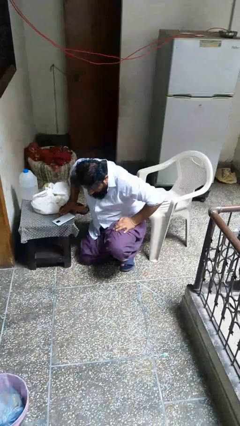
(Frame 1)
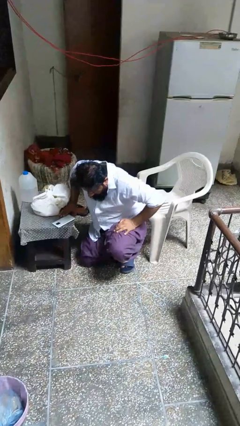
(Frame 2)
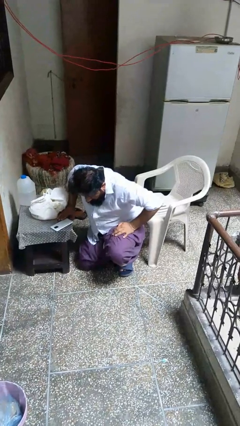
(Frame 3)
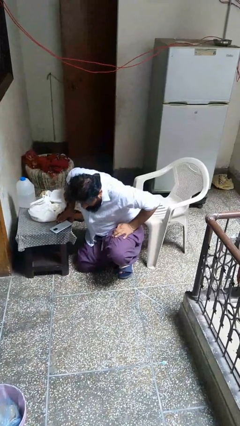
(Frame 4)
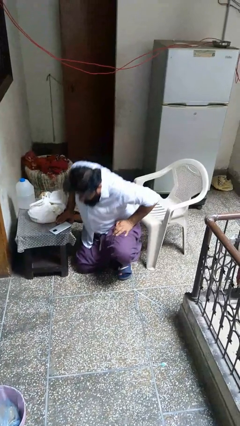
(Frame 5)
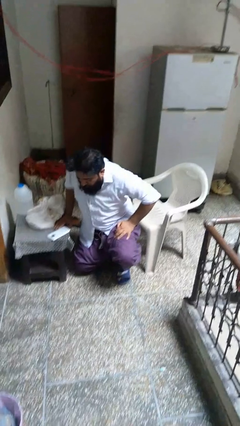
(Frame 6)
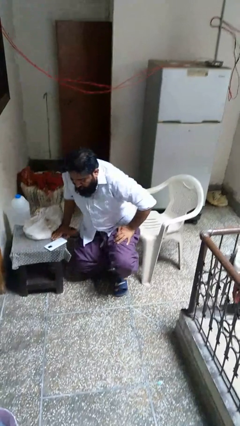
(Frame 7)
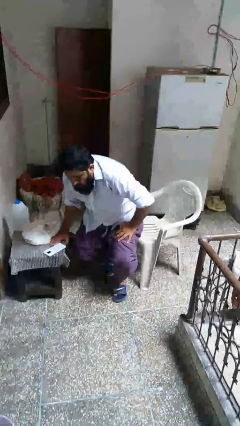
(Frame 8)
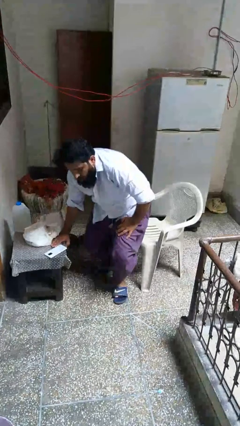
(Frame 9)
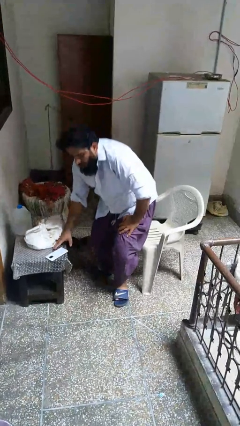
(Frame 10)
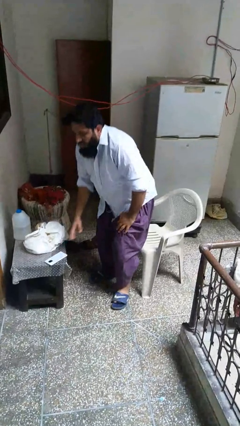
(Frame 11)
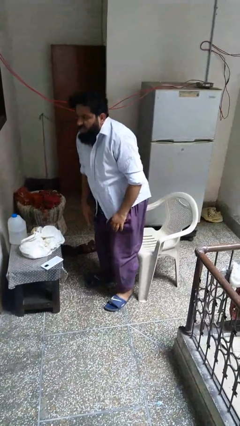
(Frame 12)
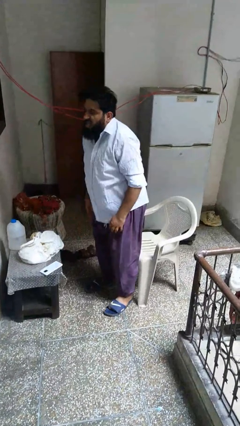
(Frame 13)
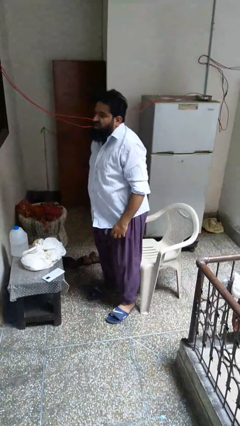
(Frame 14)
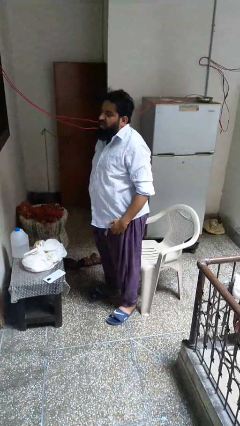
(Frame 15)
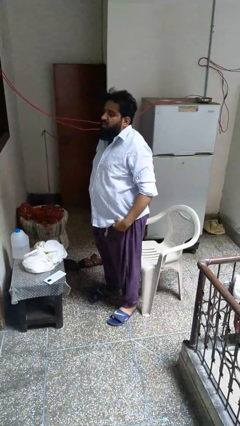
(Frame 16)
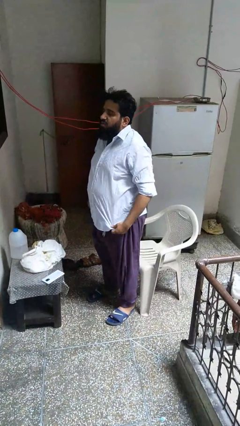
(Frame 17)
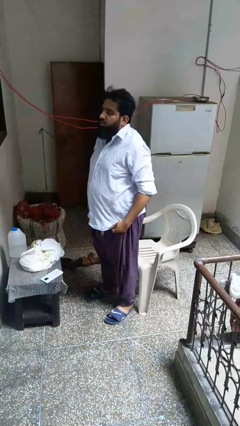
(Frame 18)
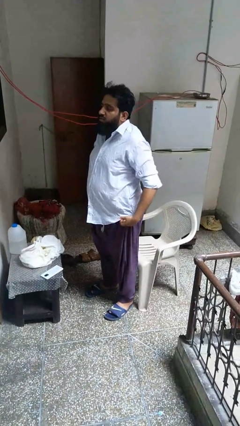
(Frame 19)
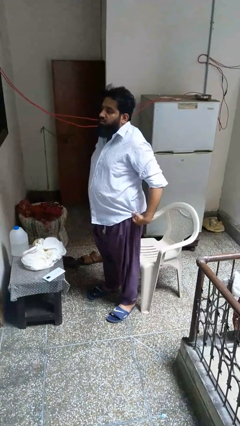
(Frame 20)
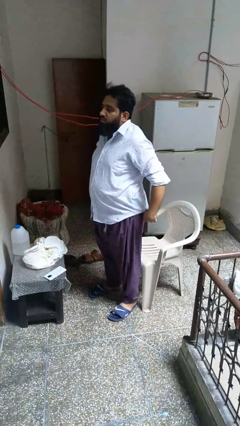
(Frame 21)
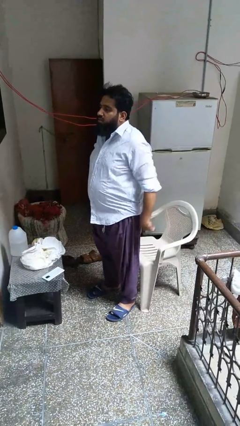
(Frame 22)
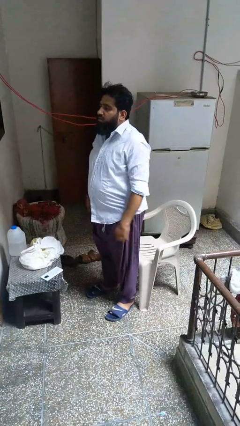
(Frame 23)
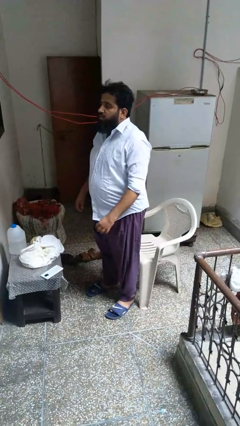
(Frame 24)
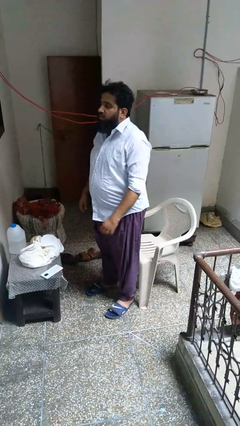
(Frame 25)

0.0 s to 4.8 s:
person stands up from floor

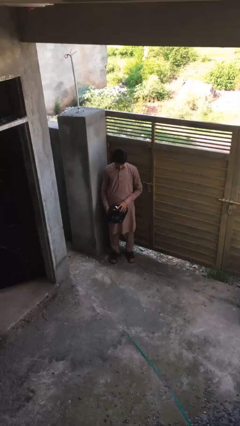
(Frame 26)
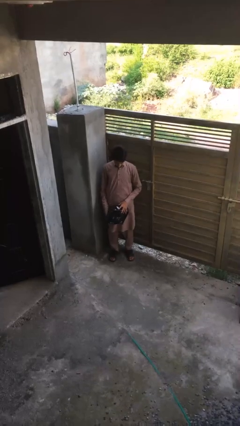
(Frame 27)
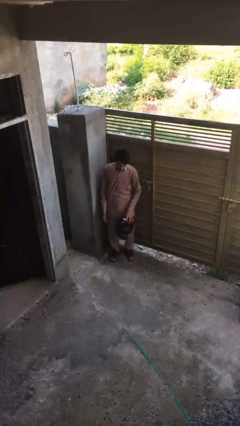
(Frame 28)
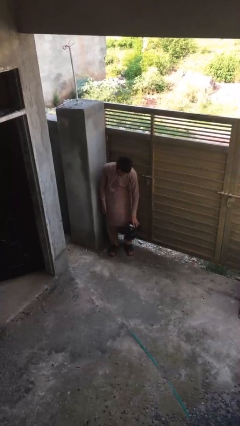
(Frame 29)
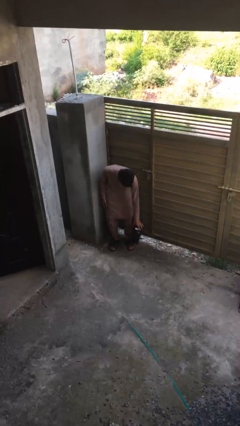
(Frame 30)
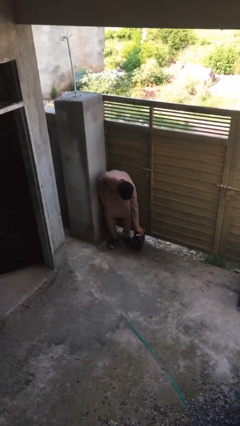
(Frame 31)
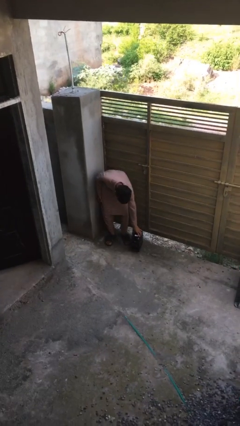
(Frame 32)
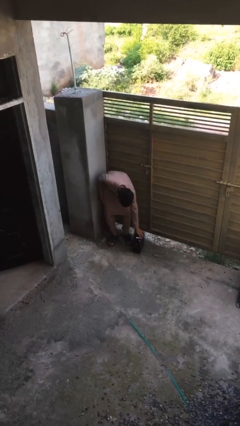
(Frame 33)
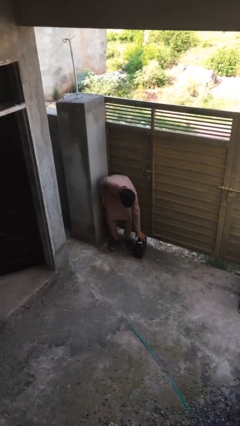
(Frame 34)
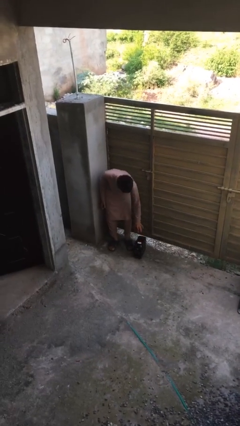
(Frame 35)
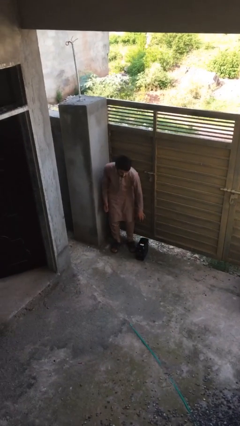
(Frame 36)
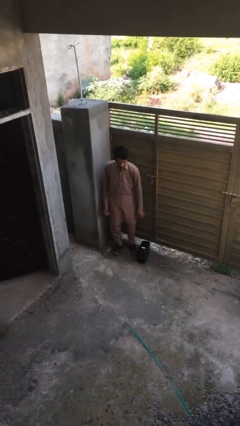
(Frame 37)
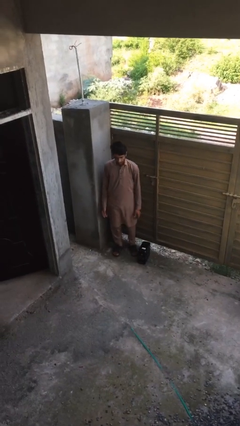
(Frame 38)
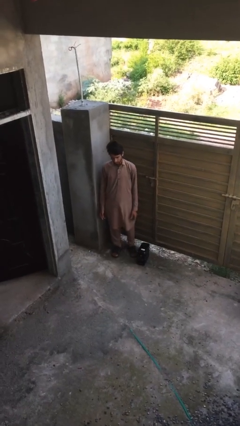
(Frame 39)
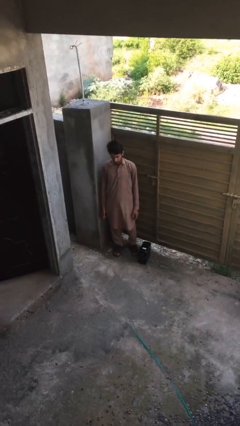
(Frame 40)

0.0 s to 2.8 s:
person puts down object on floor

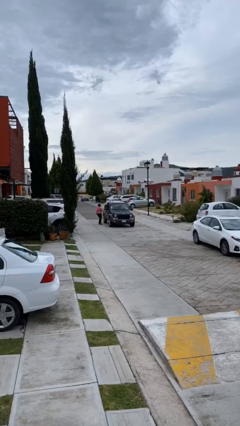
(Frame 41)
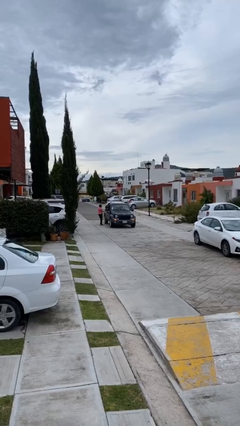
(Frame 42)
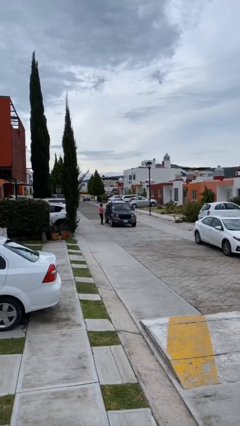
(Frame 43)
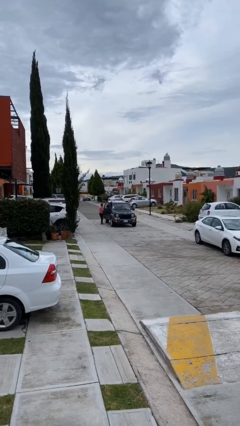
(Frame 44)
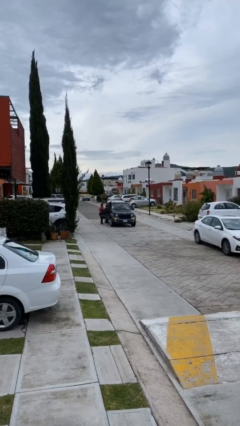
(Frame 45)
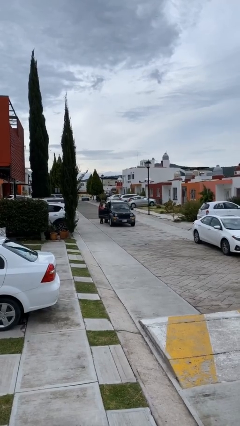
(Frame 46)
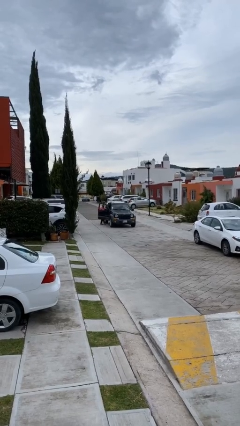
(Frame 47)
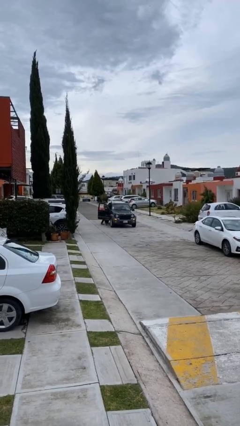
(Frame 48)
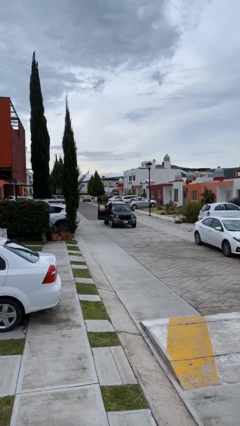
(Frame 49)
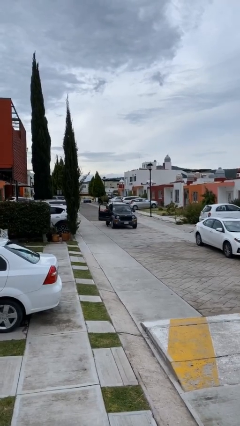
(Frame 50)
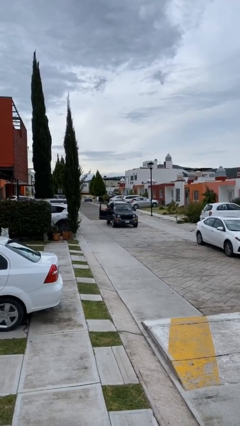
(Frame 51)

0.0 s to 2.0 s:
car picks up person

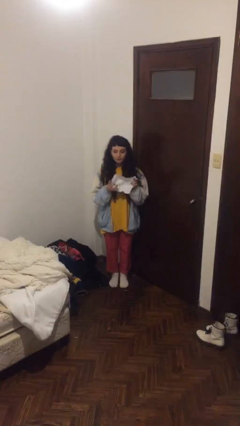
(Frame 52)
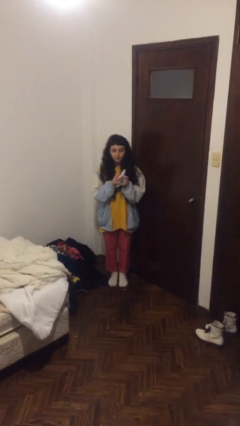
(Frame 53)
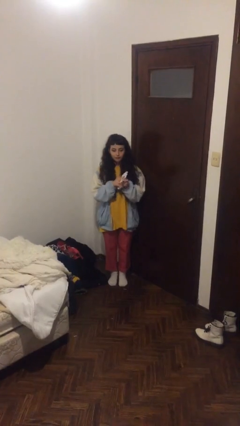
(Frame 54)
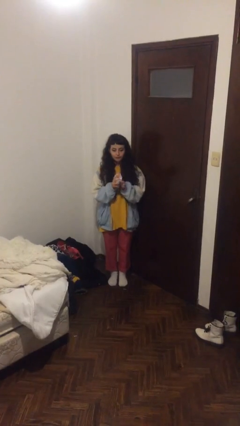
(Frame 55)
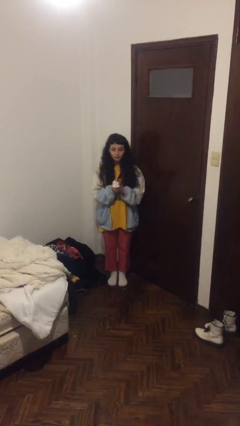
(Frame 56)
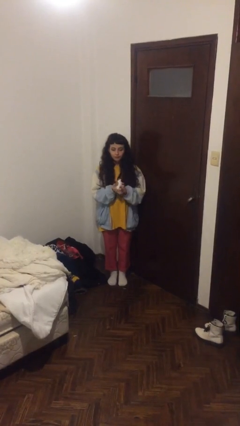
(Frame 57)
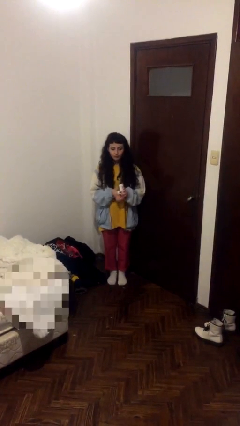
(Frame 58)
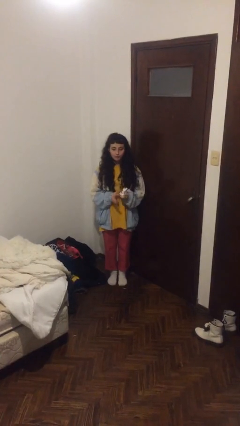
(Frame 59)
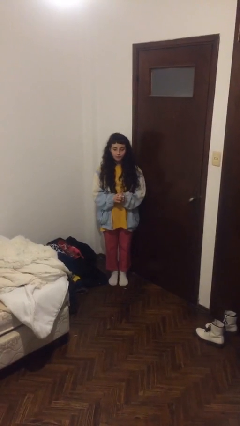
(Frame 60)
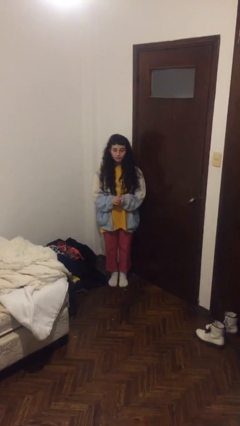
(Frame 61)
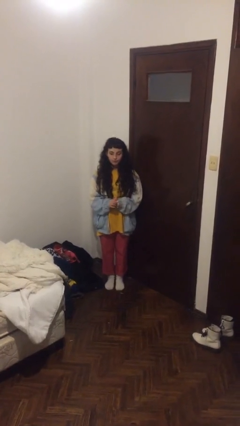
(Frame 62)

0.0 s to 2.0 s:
person crumples paper

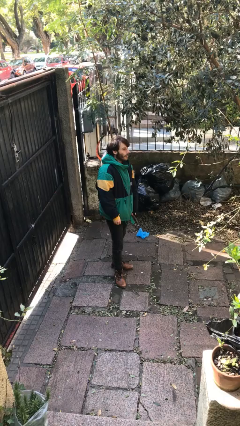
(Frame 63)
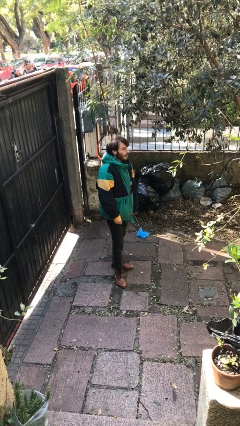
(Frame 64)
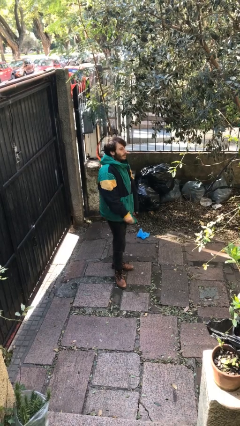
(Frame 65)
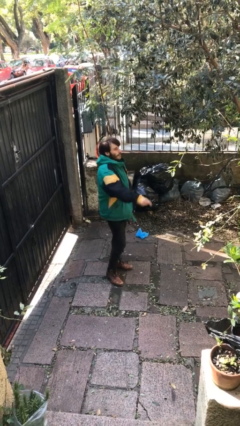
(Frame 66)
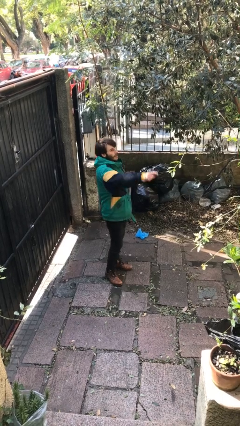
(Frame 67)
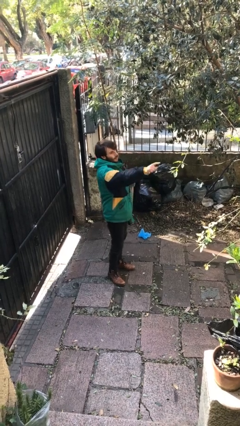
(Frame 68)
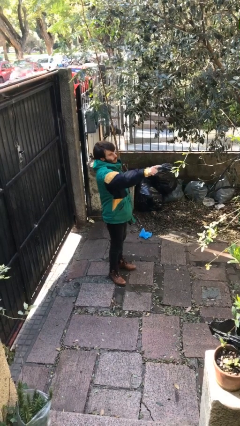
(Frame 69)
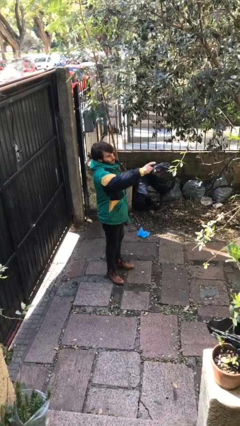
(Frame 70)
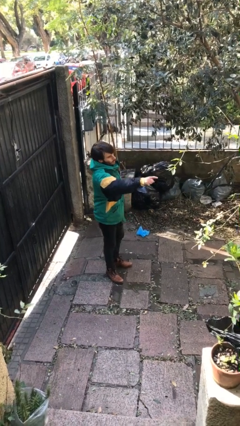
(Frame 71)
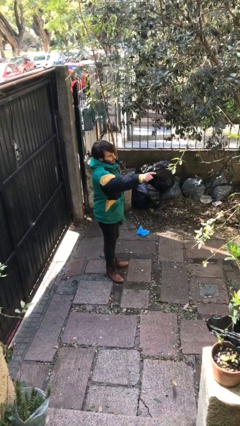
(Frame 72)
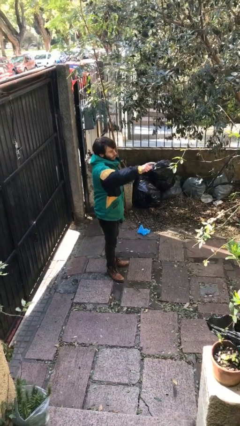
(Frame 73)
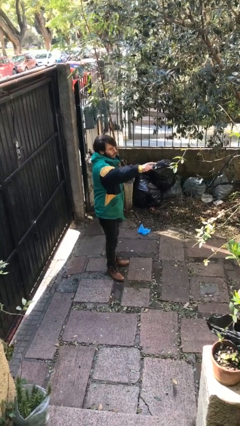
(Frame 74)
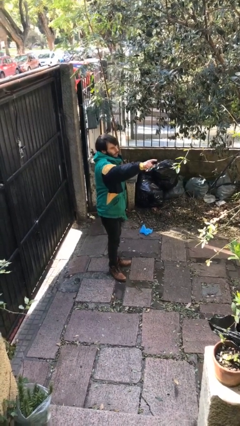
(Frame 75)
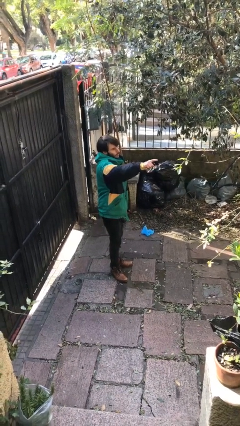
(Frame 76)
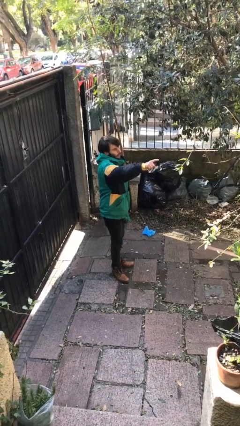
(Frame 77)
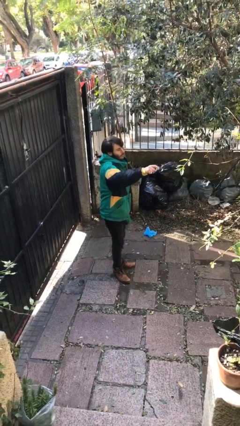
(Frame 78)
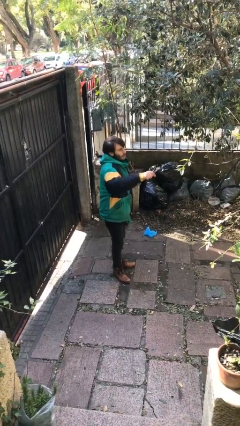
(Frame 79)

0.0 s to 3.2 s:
person points at person

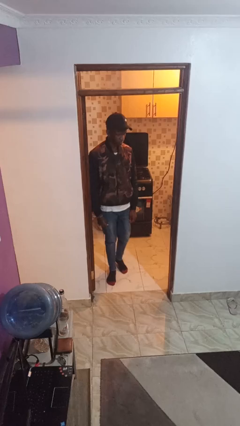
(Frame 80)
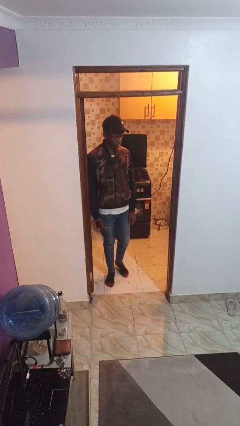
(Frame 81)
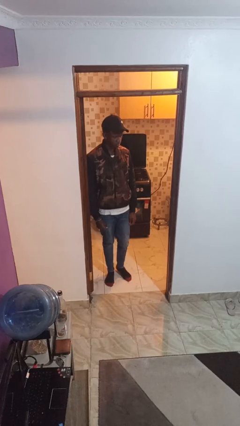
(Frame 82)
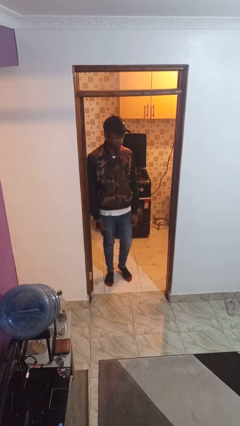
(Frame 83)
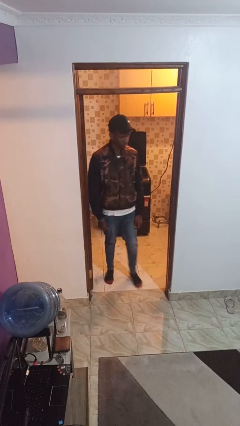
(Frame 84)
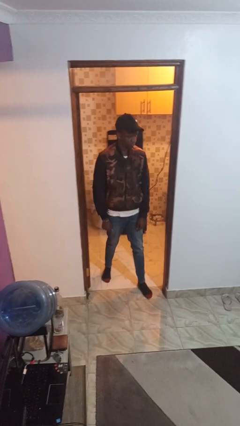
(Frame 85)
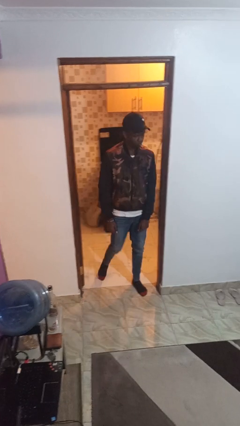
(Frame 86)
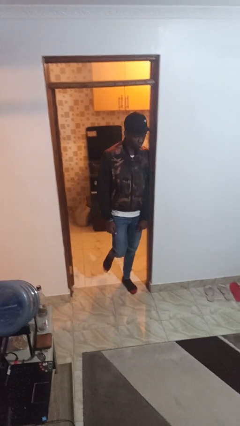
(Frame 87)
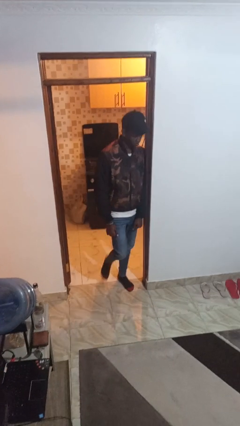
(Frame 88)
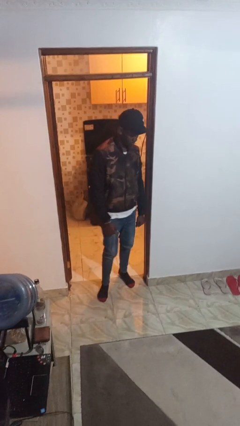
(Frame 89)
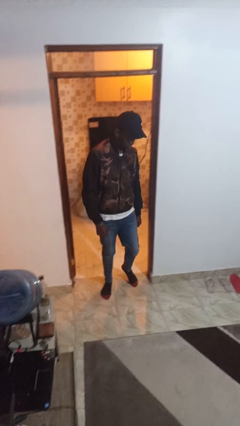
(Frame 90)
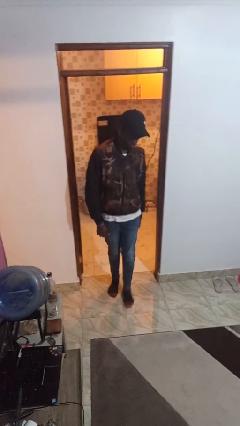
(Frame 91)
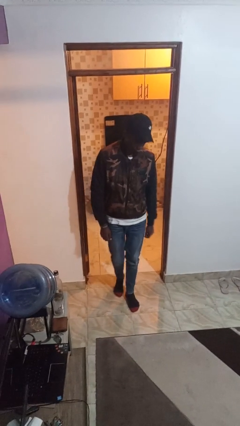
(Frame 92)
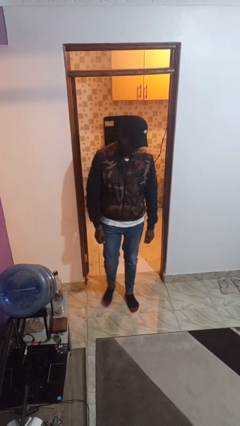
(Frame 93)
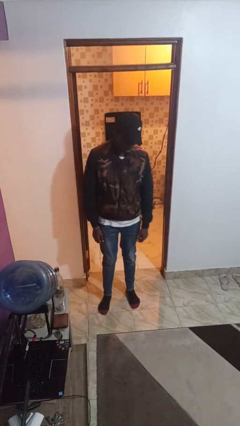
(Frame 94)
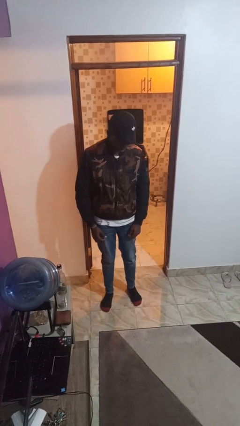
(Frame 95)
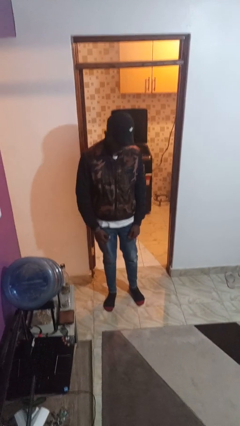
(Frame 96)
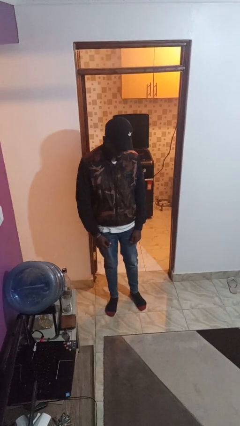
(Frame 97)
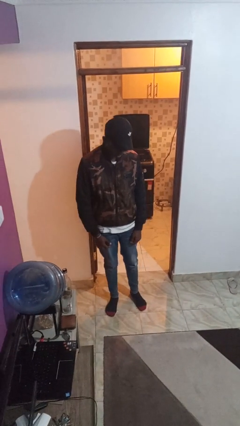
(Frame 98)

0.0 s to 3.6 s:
person bumps into wall
